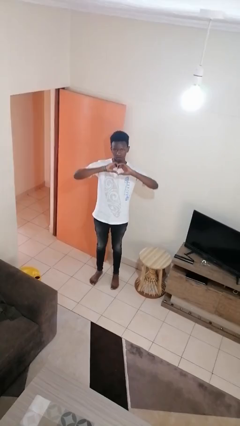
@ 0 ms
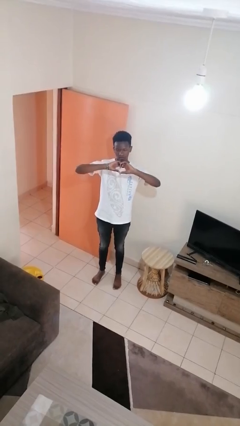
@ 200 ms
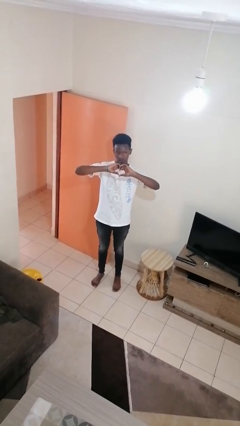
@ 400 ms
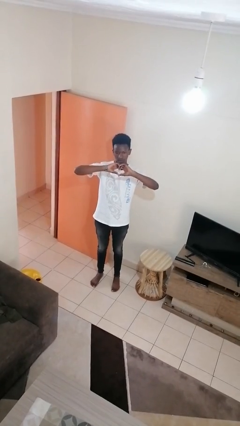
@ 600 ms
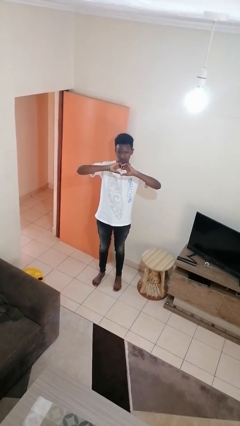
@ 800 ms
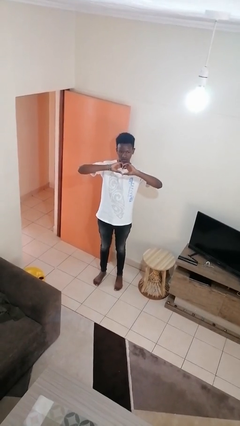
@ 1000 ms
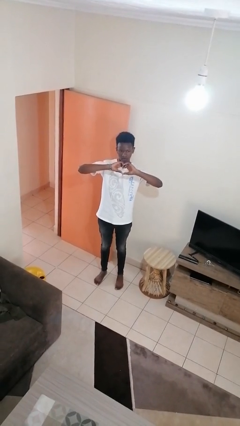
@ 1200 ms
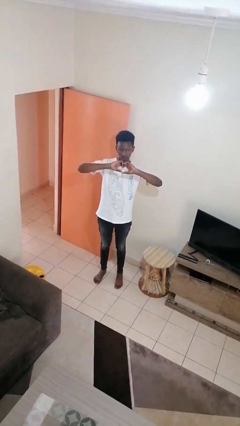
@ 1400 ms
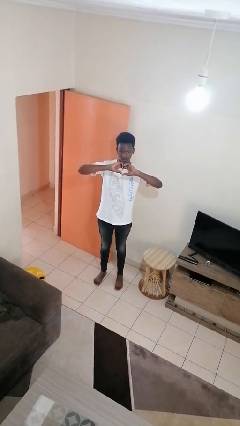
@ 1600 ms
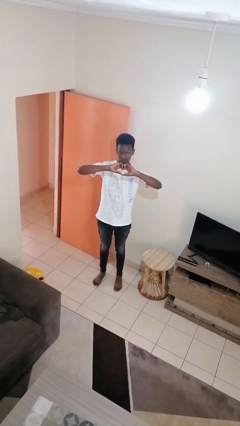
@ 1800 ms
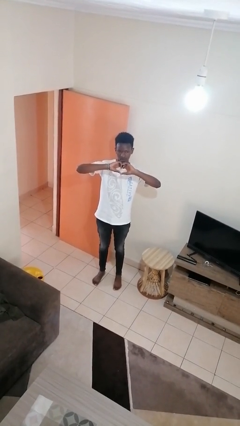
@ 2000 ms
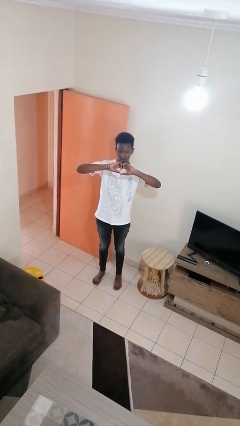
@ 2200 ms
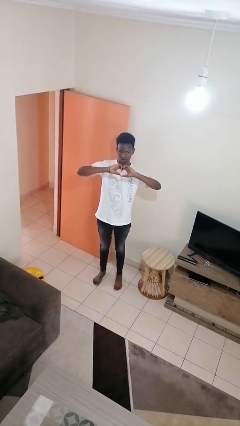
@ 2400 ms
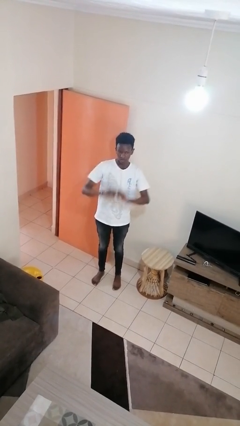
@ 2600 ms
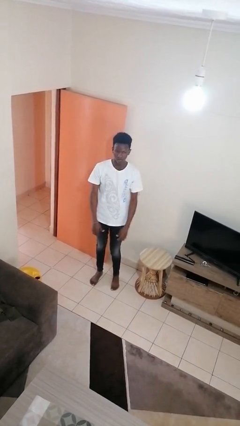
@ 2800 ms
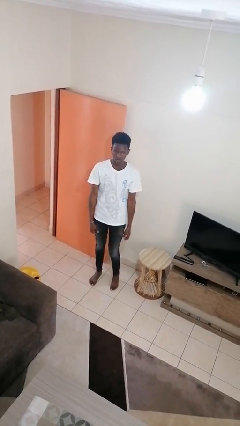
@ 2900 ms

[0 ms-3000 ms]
person gestures heart

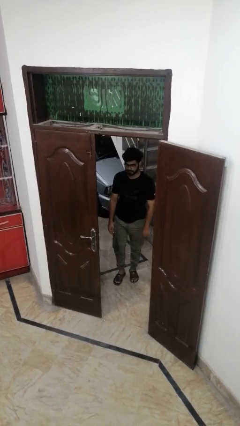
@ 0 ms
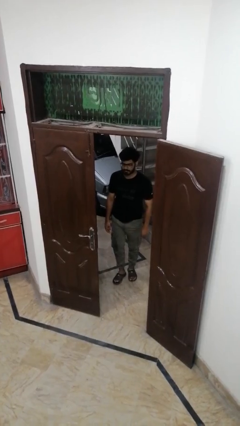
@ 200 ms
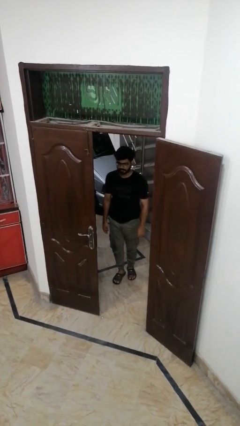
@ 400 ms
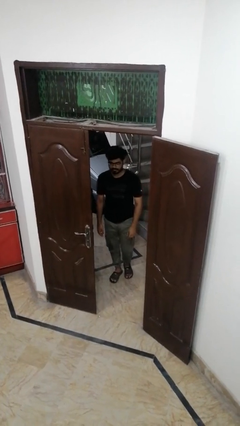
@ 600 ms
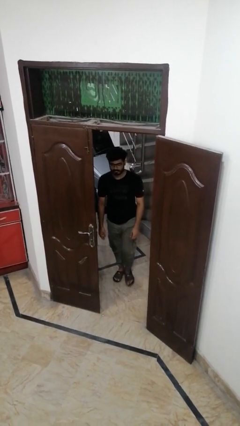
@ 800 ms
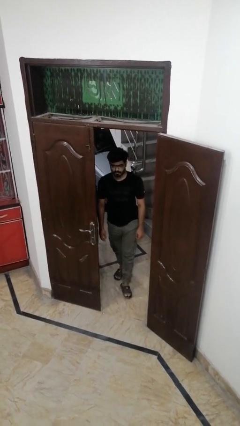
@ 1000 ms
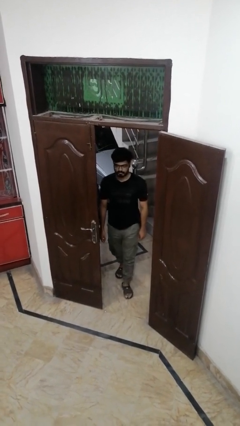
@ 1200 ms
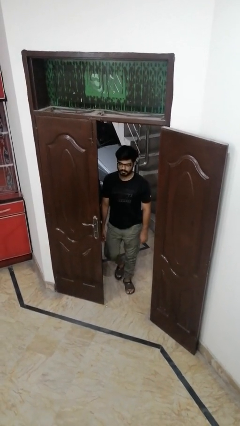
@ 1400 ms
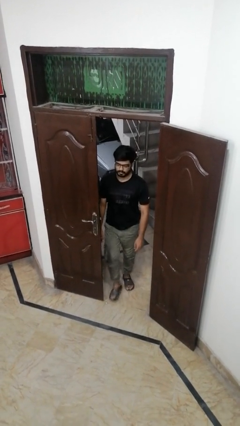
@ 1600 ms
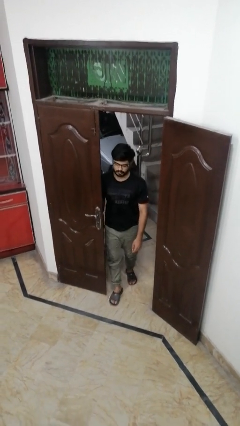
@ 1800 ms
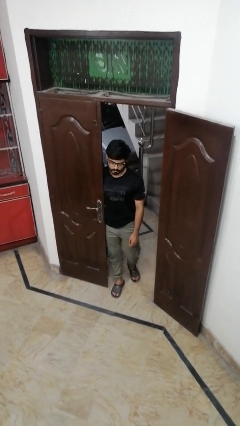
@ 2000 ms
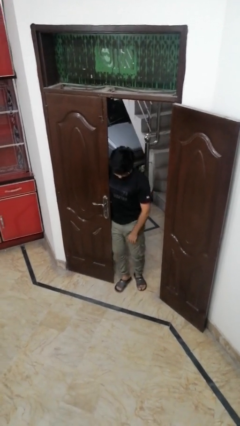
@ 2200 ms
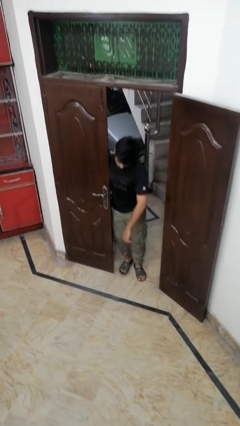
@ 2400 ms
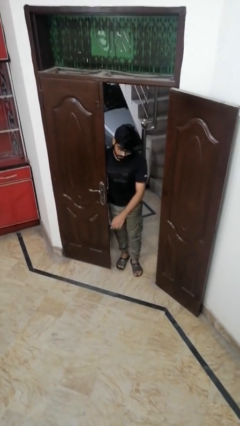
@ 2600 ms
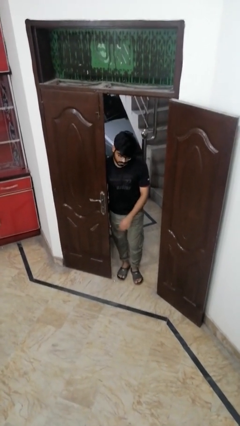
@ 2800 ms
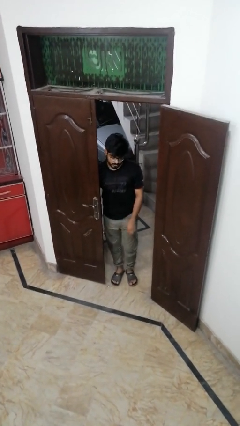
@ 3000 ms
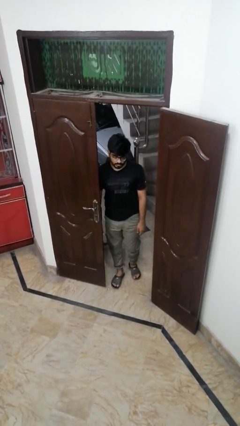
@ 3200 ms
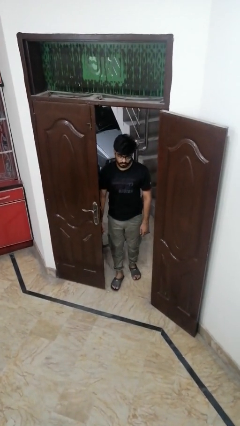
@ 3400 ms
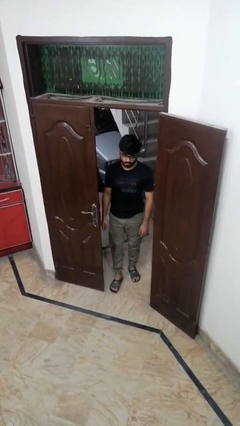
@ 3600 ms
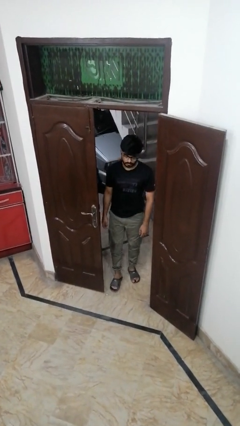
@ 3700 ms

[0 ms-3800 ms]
person bumps into wall

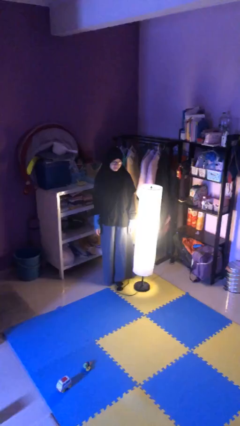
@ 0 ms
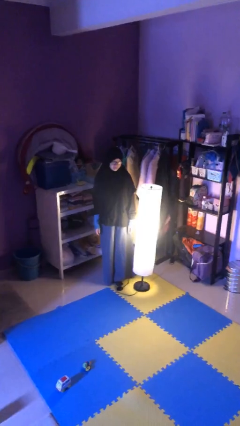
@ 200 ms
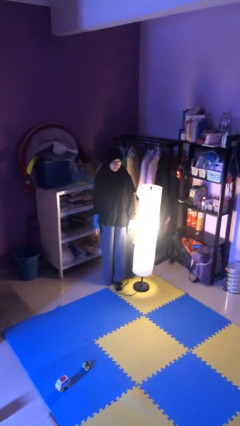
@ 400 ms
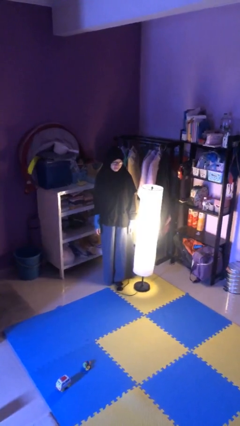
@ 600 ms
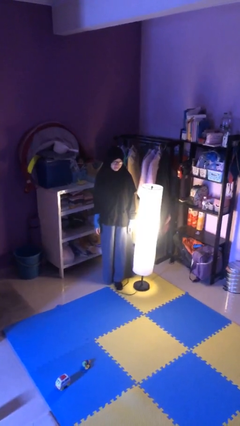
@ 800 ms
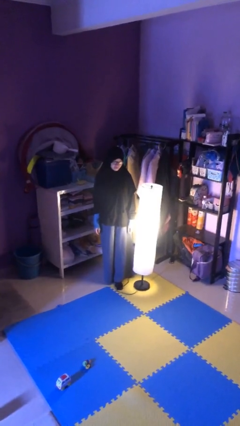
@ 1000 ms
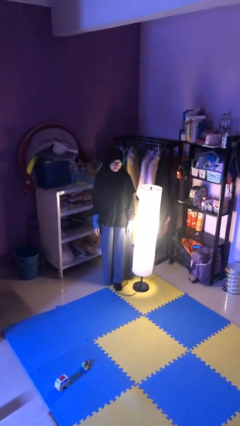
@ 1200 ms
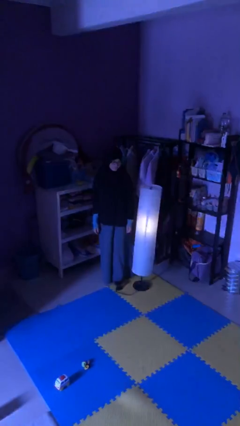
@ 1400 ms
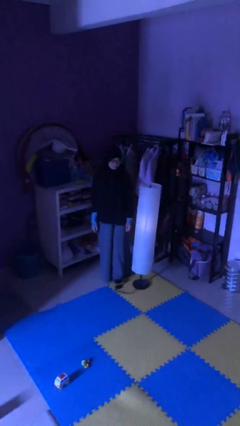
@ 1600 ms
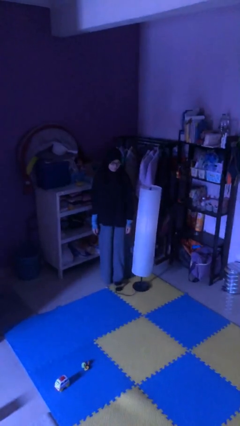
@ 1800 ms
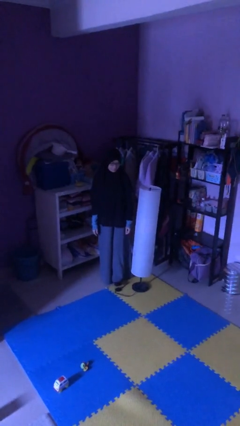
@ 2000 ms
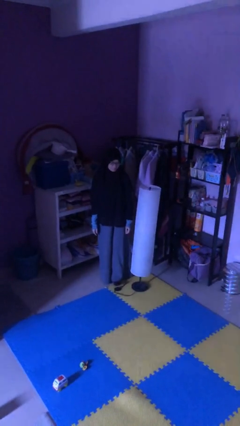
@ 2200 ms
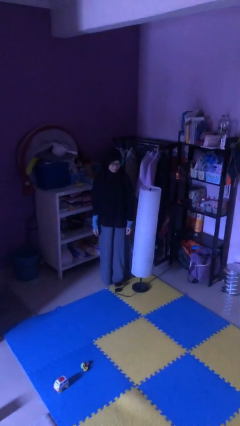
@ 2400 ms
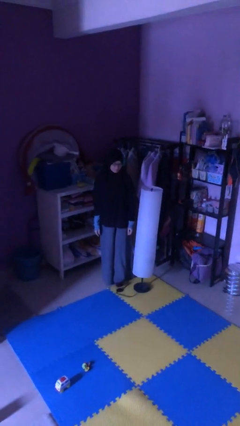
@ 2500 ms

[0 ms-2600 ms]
person turns off lamp

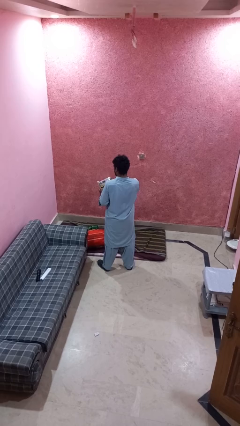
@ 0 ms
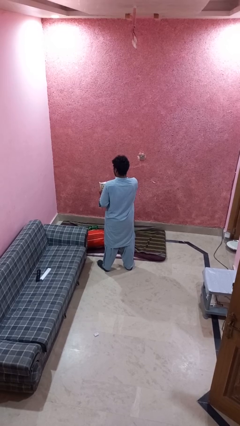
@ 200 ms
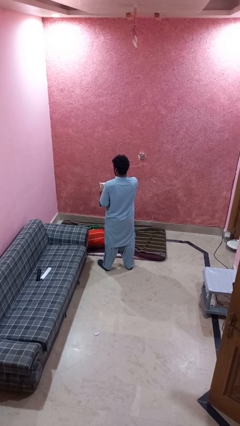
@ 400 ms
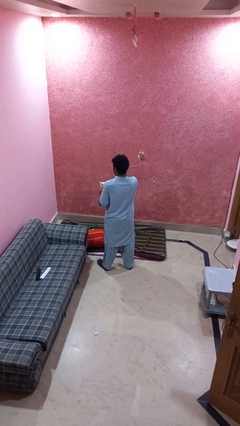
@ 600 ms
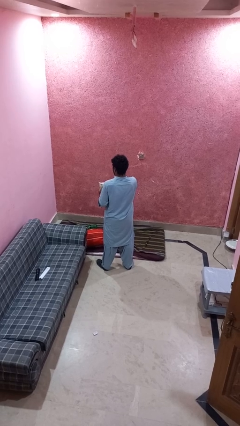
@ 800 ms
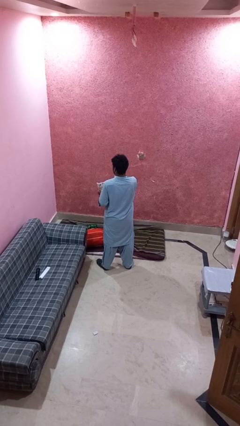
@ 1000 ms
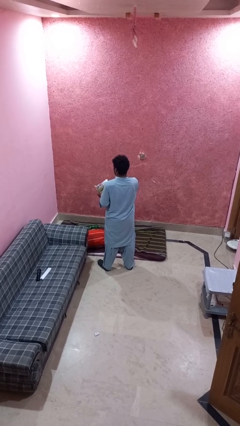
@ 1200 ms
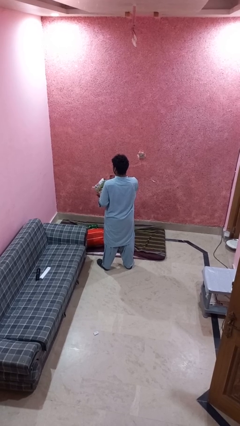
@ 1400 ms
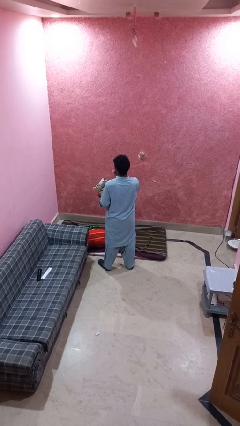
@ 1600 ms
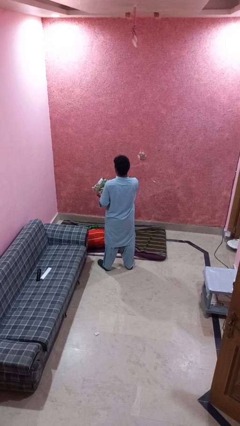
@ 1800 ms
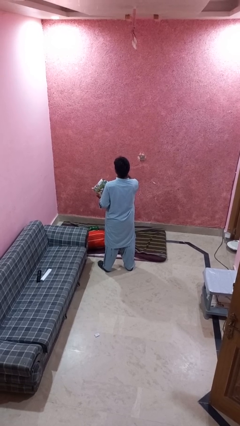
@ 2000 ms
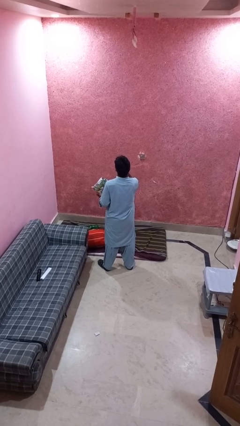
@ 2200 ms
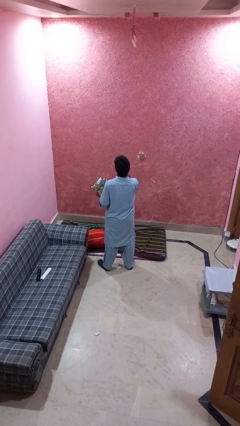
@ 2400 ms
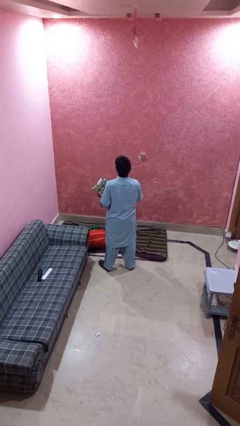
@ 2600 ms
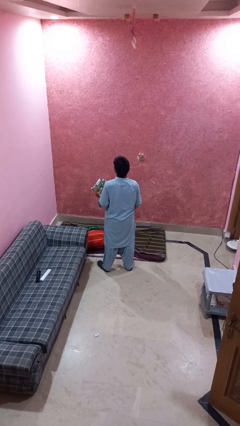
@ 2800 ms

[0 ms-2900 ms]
person eats snack from bag

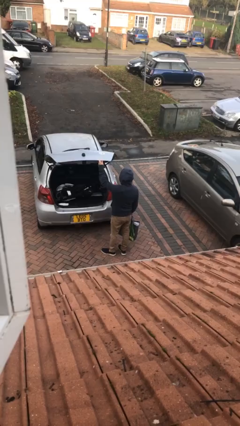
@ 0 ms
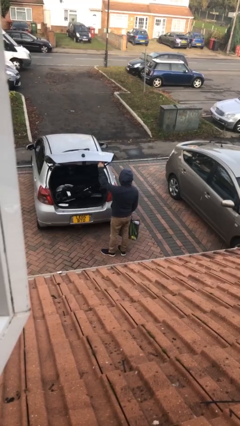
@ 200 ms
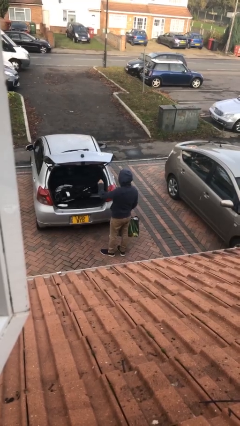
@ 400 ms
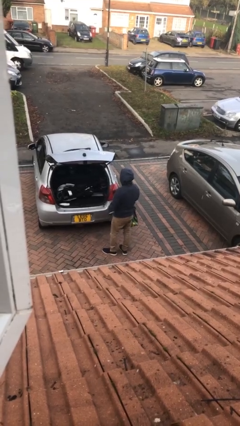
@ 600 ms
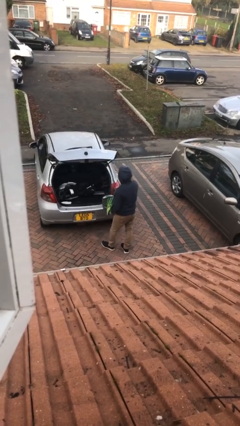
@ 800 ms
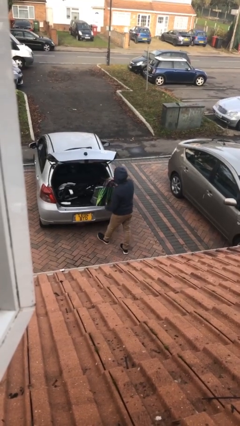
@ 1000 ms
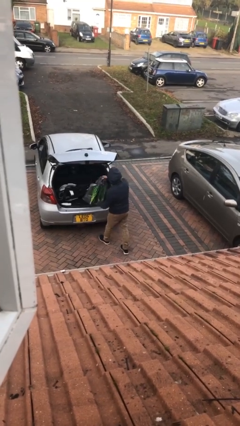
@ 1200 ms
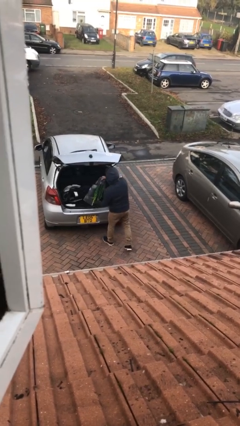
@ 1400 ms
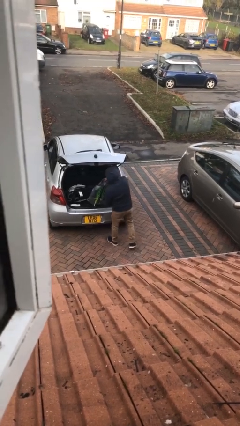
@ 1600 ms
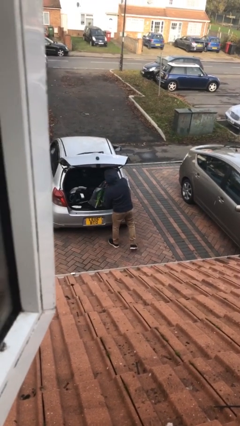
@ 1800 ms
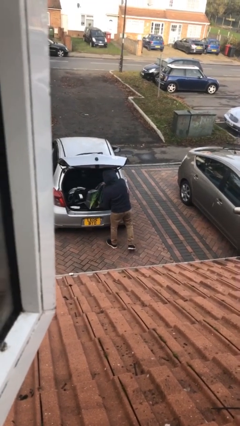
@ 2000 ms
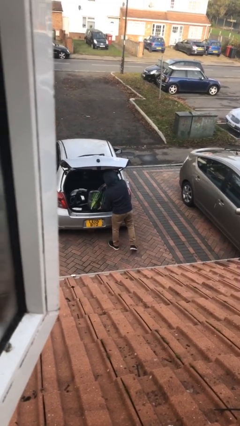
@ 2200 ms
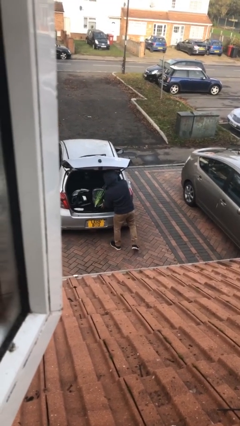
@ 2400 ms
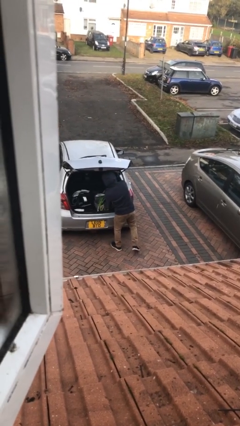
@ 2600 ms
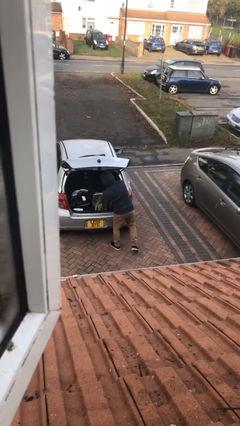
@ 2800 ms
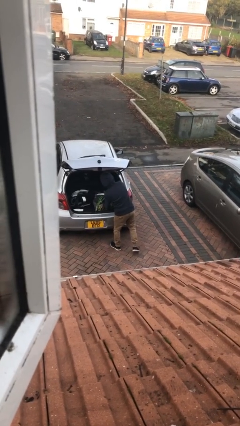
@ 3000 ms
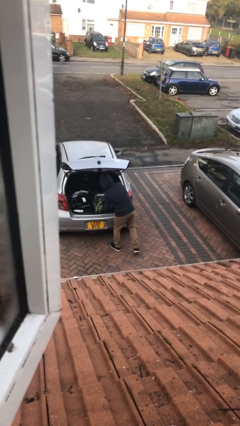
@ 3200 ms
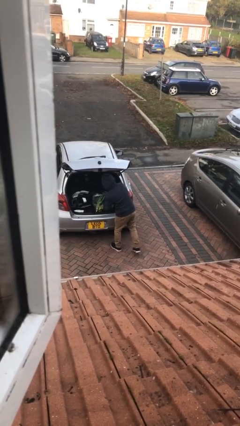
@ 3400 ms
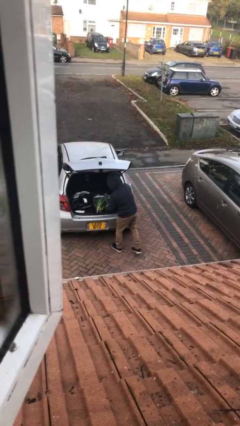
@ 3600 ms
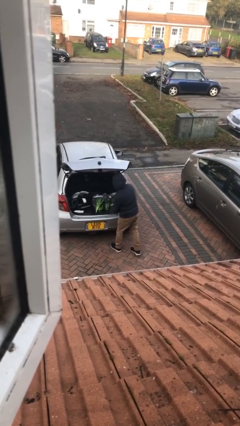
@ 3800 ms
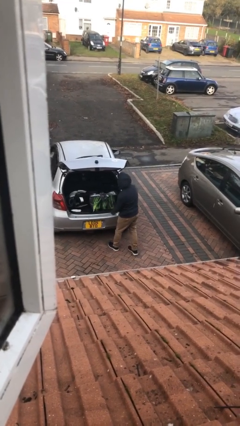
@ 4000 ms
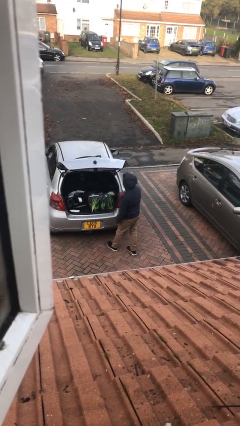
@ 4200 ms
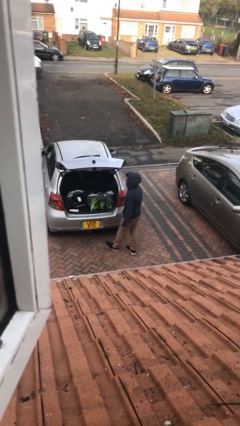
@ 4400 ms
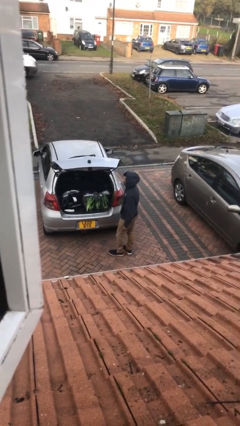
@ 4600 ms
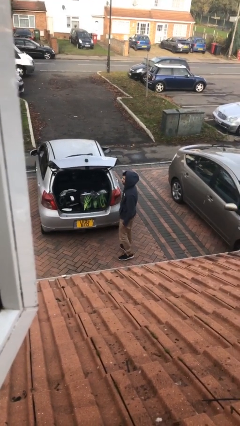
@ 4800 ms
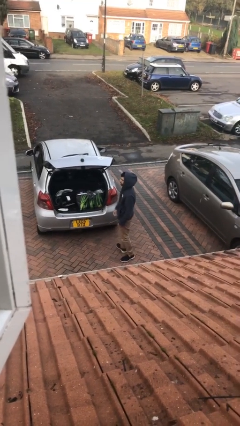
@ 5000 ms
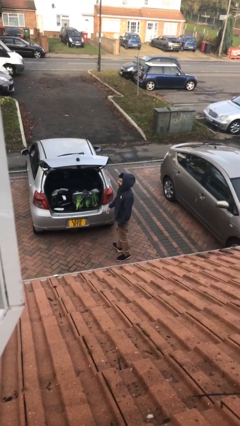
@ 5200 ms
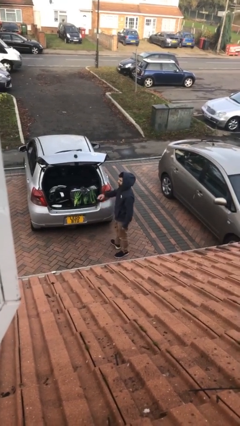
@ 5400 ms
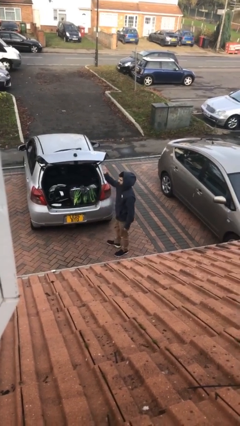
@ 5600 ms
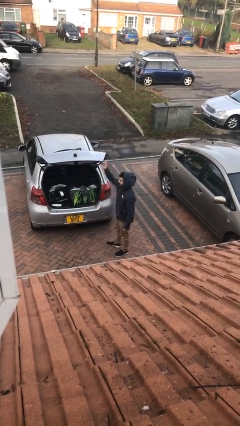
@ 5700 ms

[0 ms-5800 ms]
person loads car
